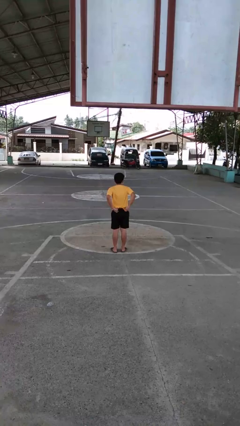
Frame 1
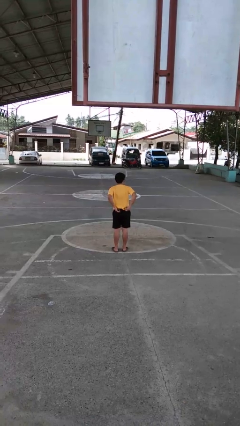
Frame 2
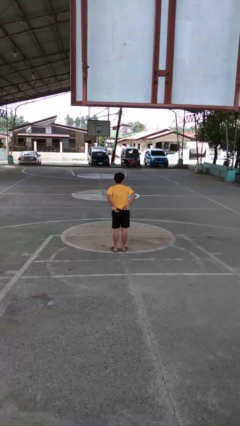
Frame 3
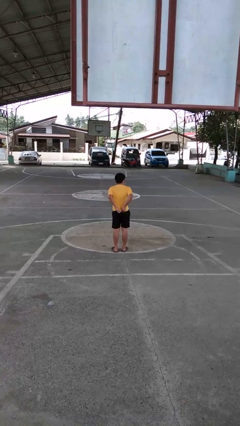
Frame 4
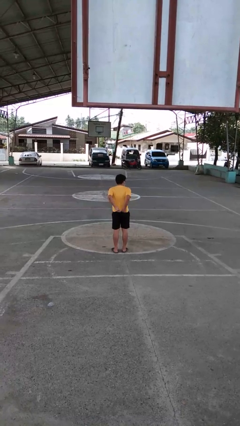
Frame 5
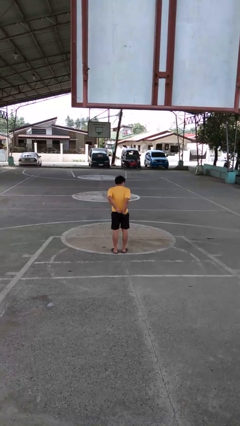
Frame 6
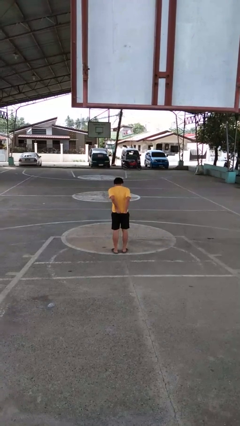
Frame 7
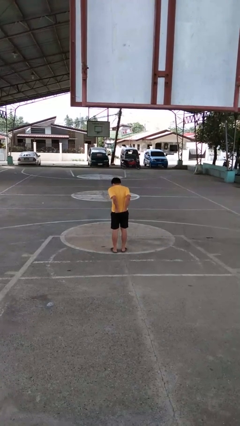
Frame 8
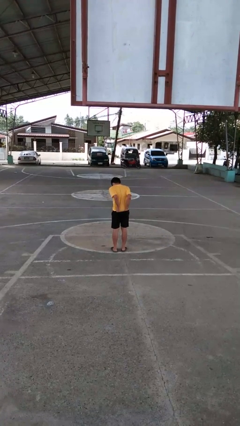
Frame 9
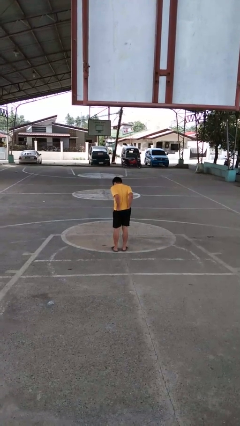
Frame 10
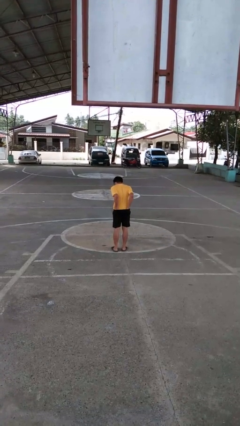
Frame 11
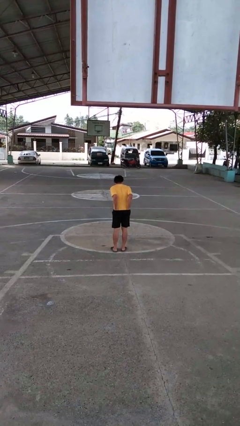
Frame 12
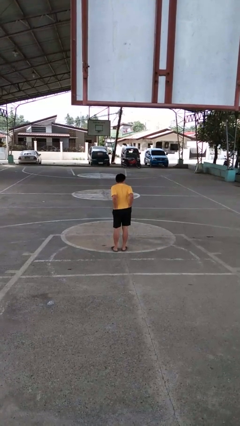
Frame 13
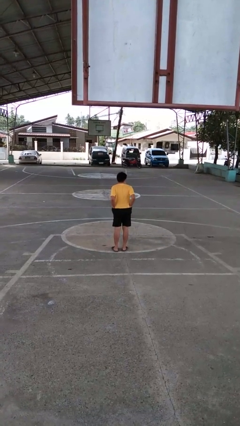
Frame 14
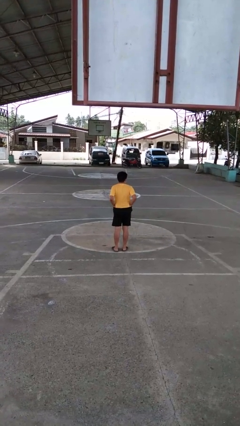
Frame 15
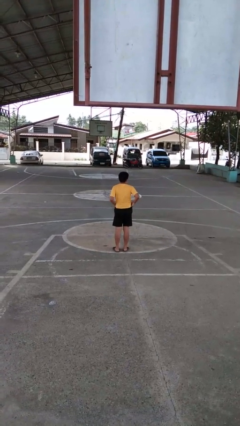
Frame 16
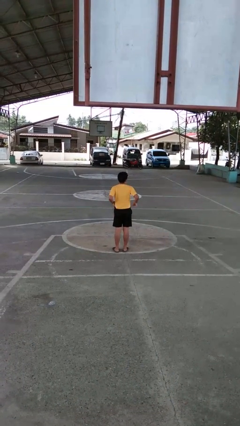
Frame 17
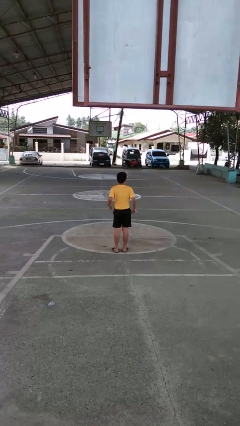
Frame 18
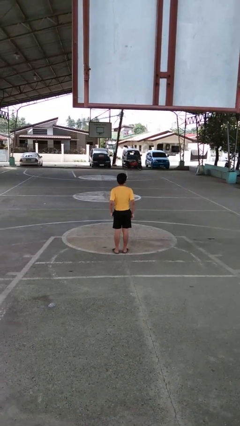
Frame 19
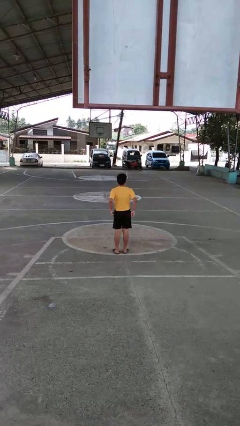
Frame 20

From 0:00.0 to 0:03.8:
person tucks in shirt

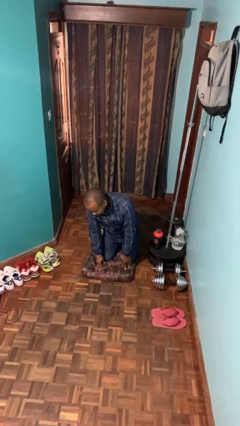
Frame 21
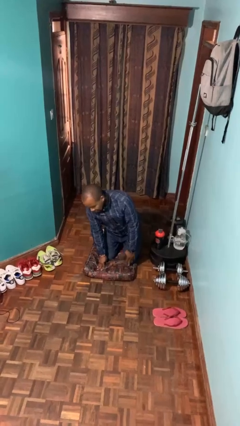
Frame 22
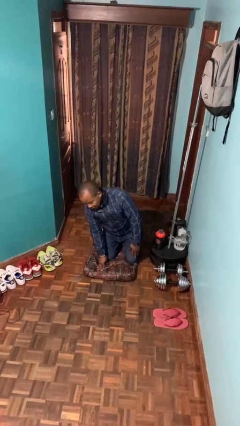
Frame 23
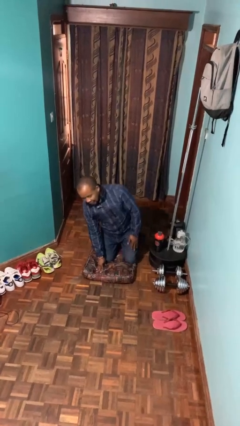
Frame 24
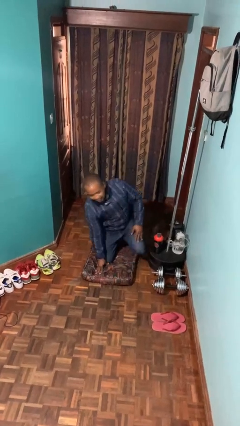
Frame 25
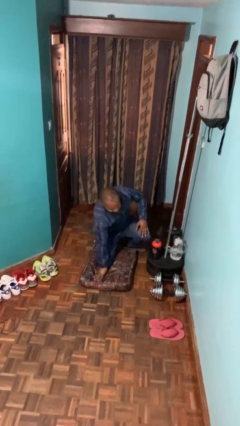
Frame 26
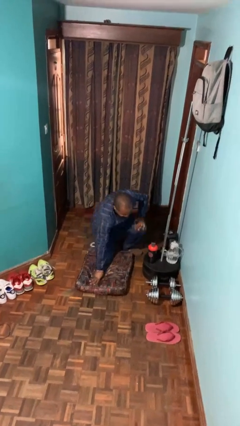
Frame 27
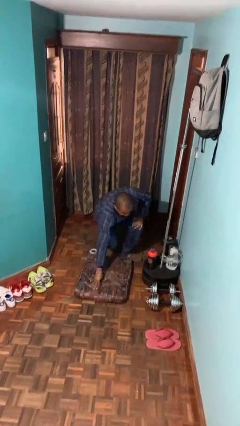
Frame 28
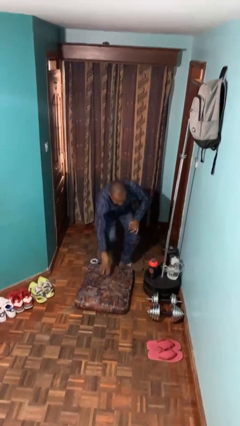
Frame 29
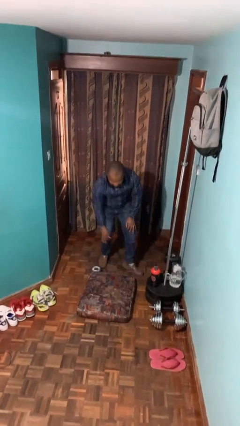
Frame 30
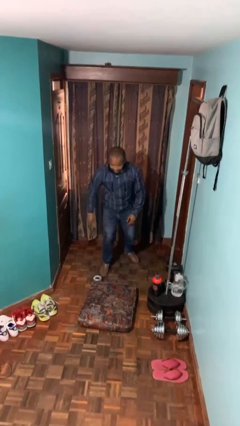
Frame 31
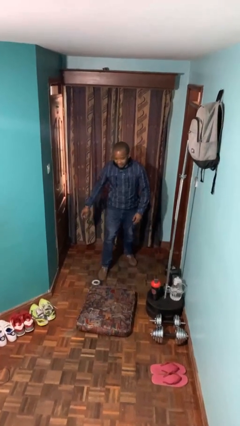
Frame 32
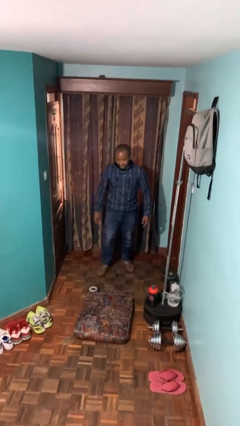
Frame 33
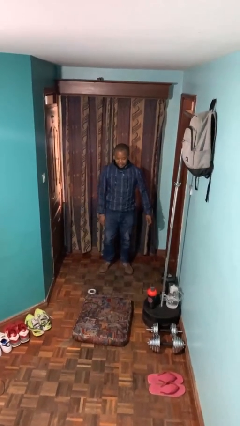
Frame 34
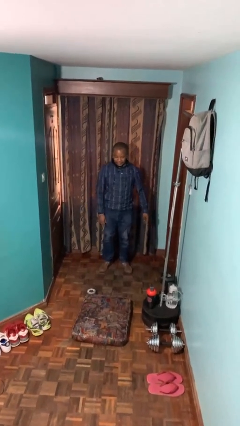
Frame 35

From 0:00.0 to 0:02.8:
person stands up from floor

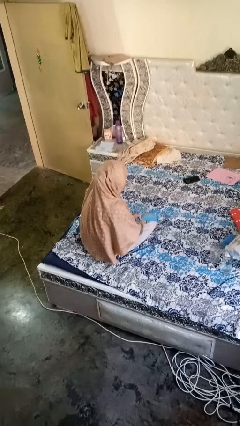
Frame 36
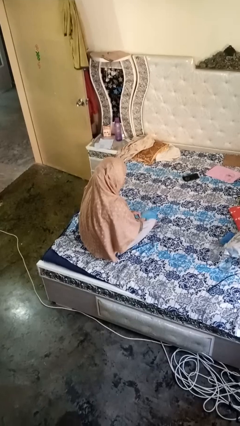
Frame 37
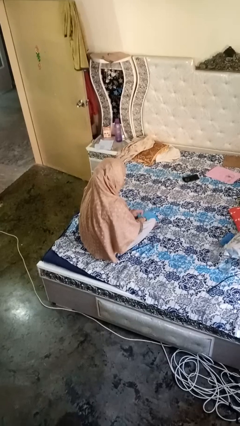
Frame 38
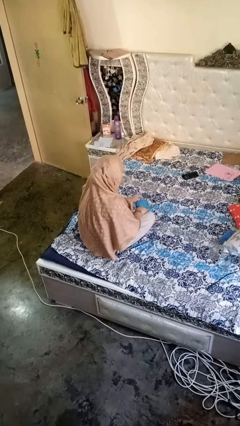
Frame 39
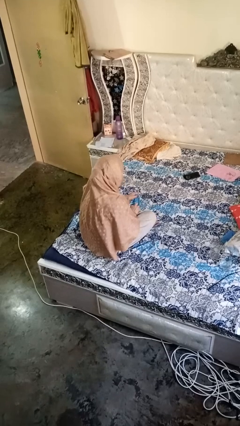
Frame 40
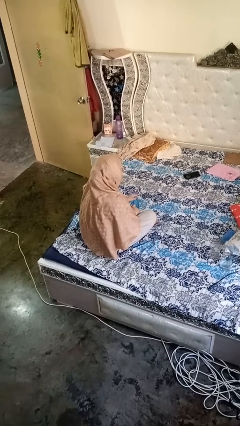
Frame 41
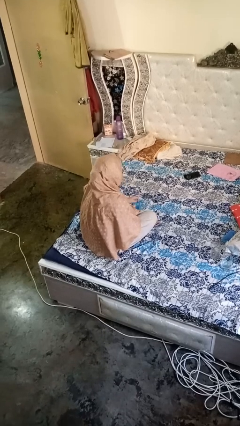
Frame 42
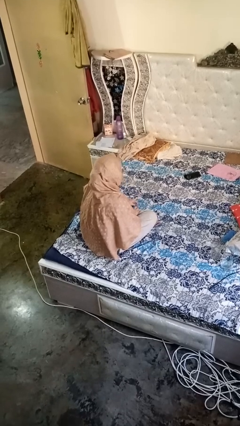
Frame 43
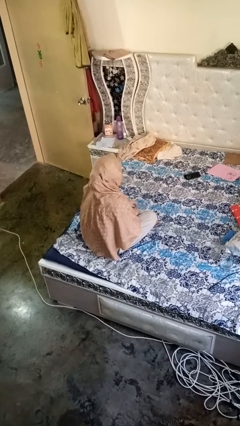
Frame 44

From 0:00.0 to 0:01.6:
person takes off gloves

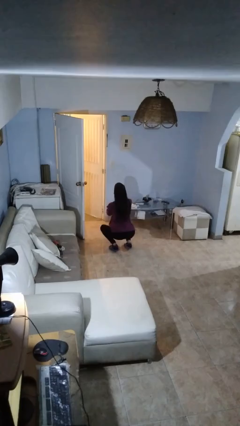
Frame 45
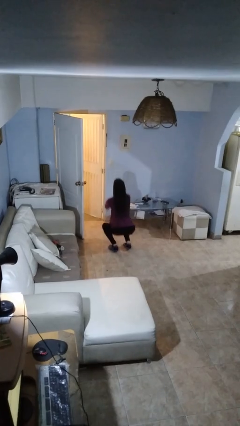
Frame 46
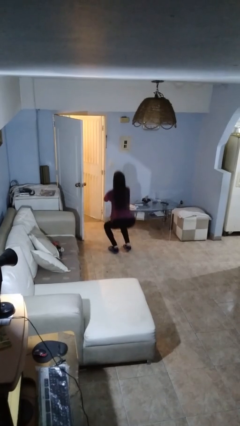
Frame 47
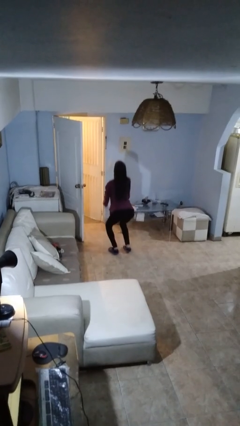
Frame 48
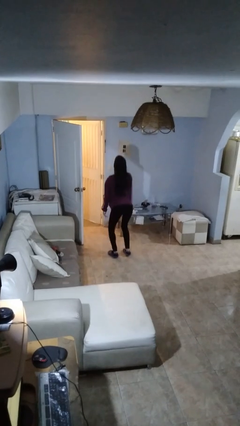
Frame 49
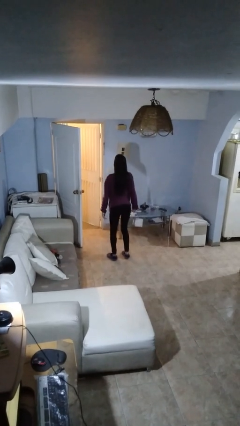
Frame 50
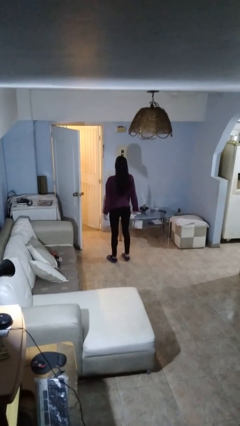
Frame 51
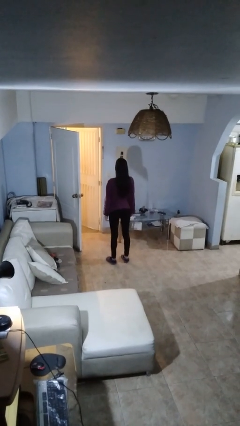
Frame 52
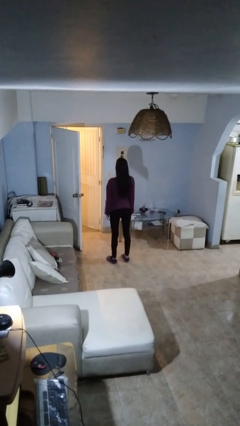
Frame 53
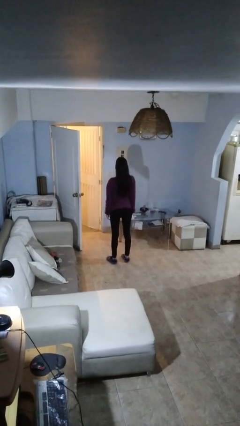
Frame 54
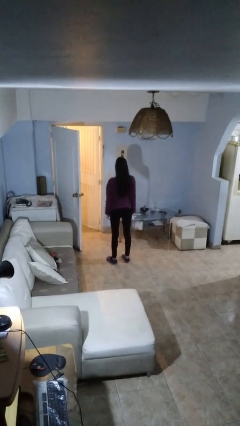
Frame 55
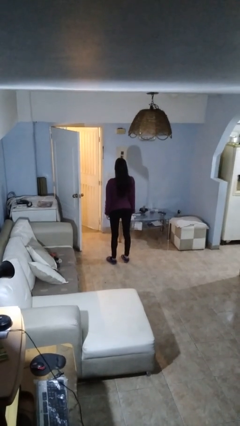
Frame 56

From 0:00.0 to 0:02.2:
person stands up

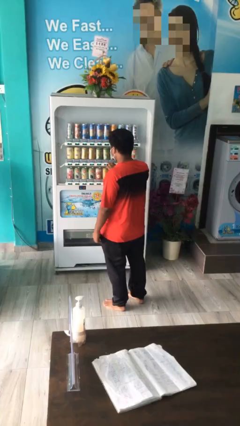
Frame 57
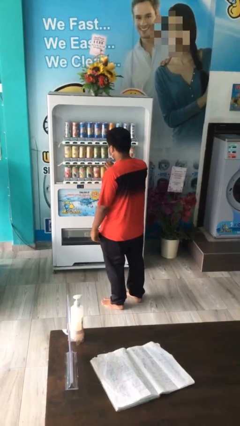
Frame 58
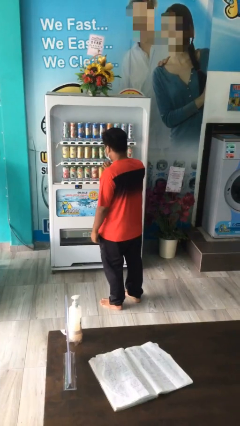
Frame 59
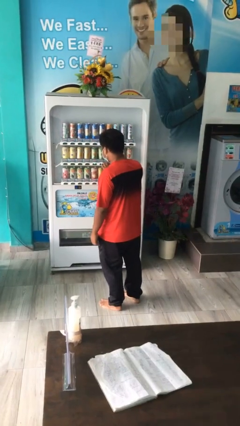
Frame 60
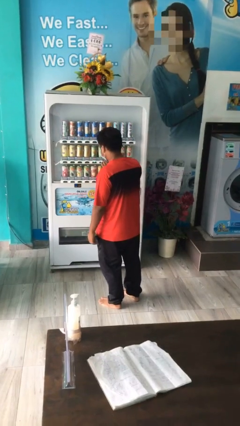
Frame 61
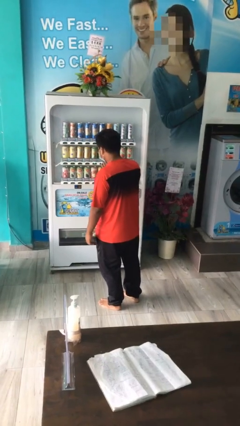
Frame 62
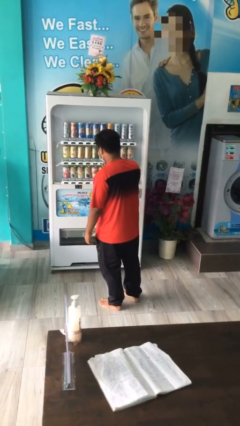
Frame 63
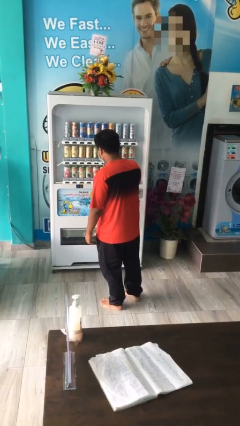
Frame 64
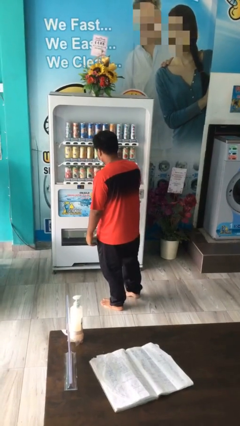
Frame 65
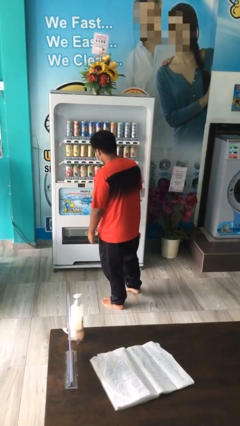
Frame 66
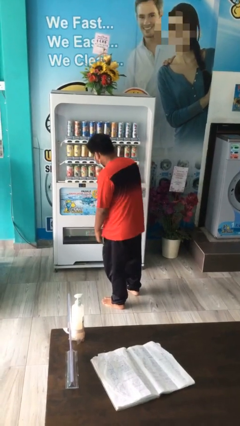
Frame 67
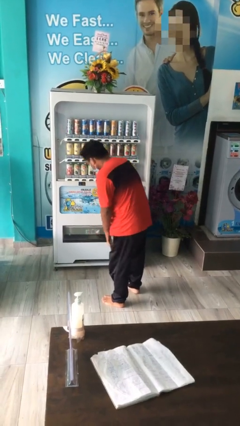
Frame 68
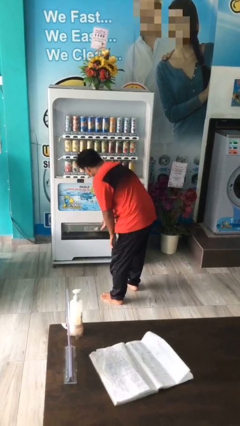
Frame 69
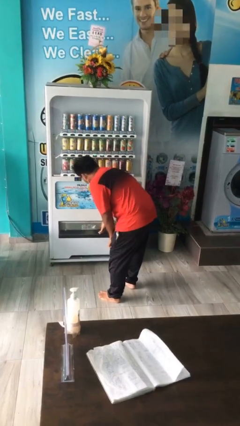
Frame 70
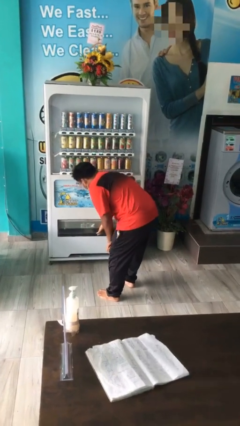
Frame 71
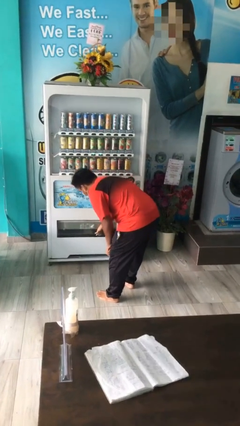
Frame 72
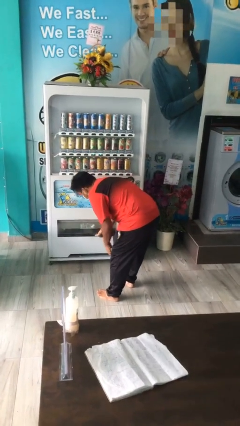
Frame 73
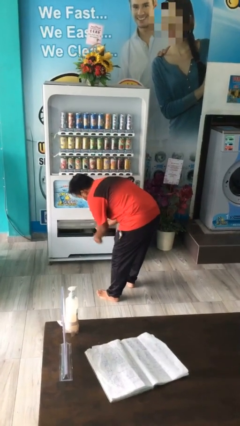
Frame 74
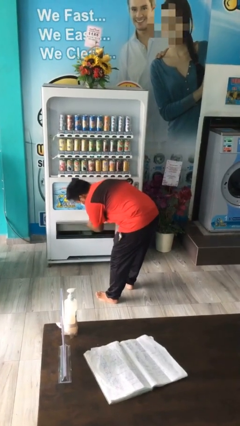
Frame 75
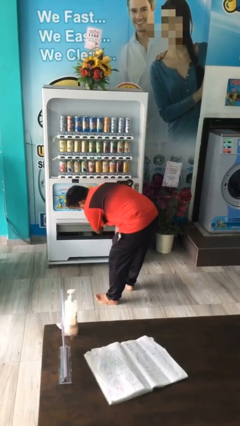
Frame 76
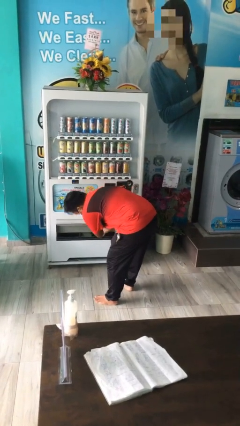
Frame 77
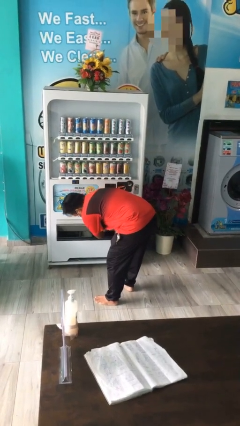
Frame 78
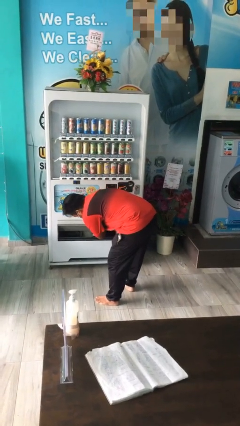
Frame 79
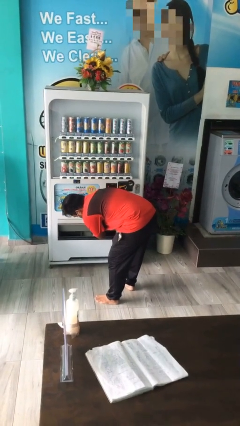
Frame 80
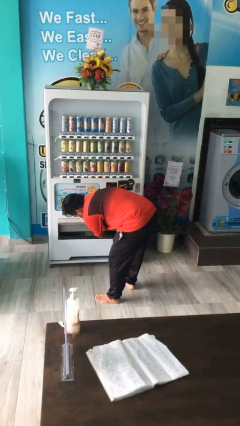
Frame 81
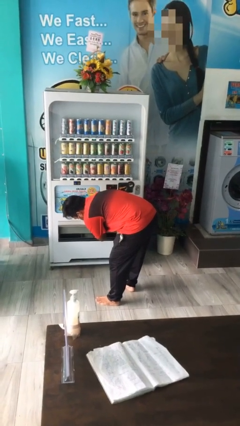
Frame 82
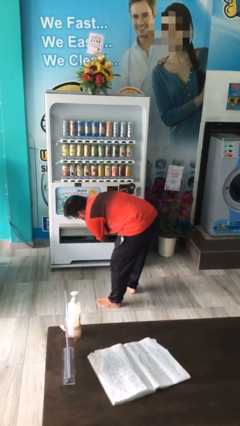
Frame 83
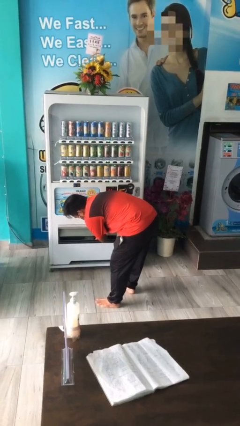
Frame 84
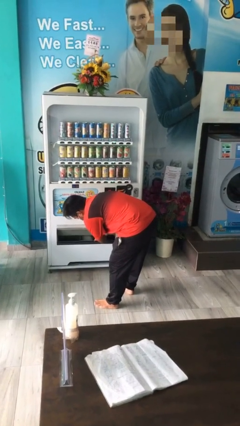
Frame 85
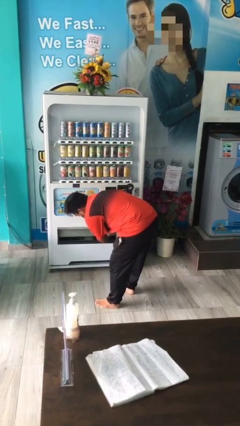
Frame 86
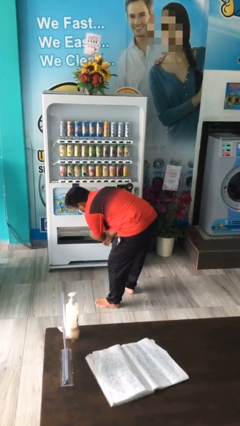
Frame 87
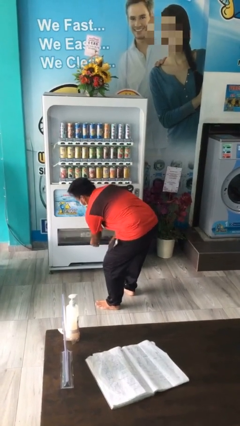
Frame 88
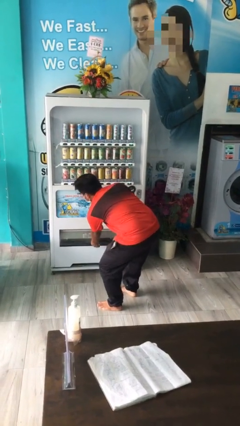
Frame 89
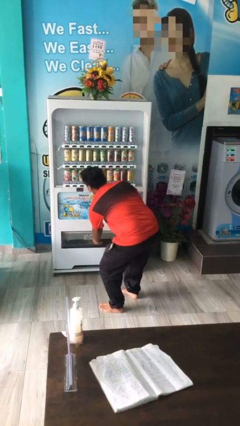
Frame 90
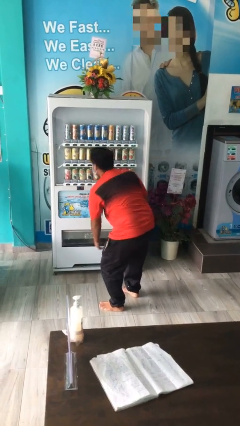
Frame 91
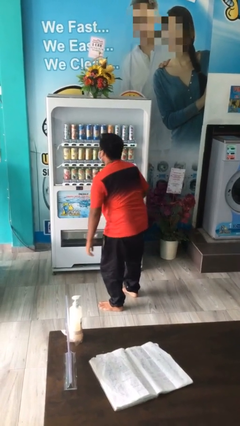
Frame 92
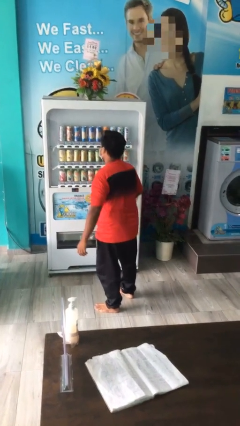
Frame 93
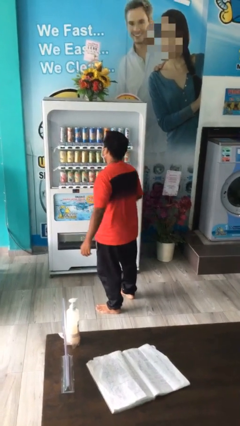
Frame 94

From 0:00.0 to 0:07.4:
person purchases from machine
